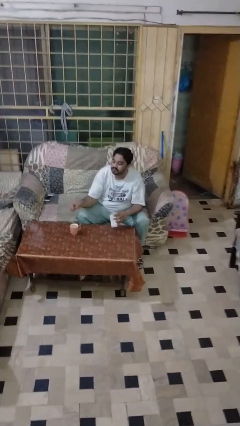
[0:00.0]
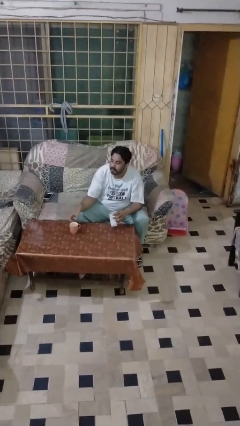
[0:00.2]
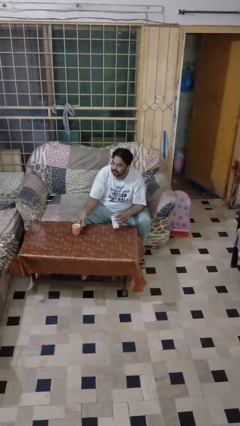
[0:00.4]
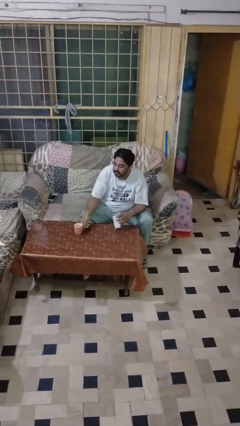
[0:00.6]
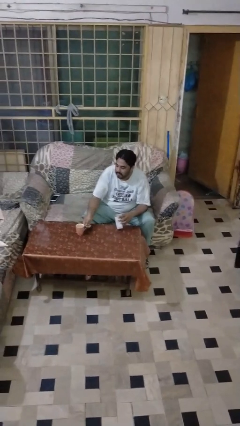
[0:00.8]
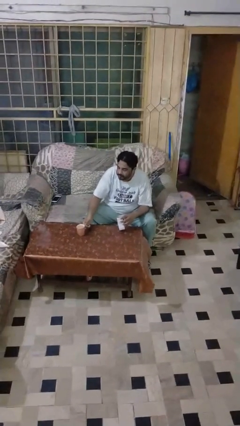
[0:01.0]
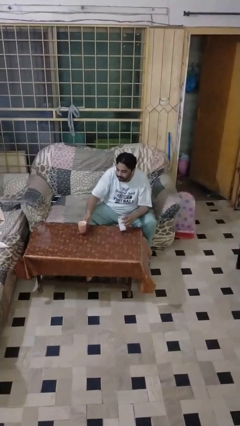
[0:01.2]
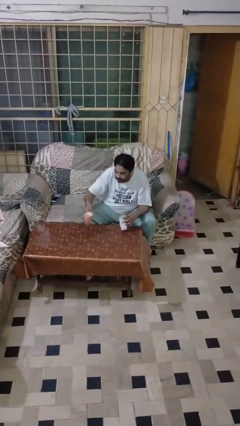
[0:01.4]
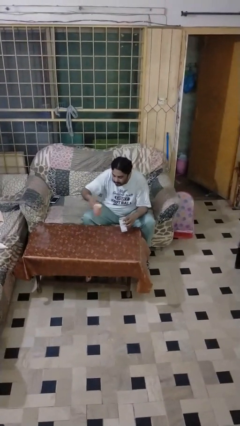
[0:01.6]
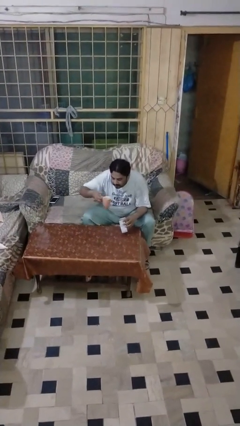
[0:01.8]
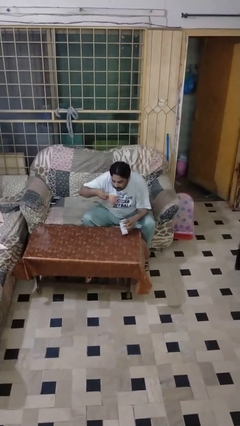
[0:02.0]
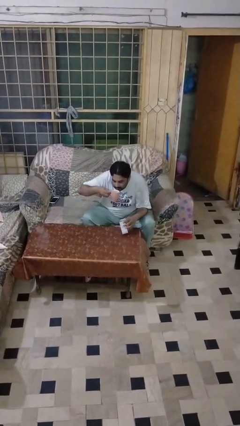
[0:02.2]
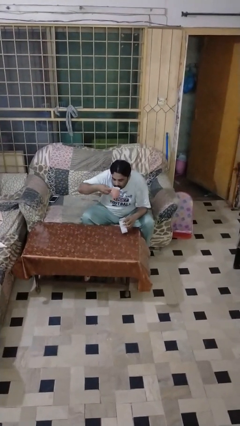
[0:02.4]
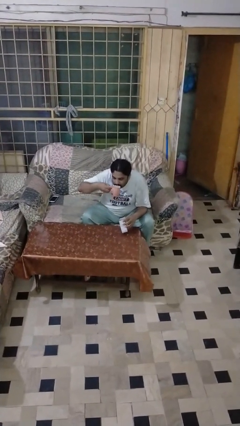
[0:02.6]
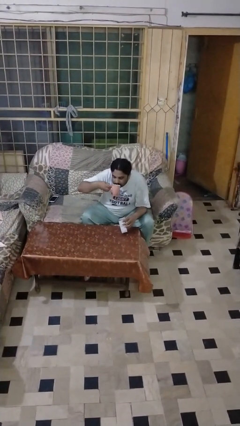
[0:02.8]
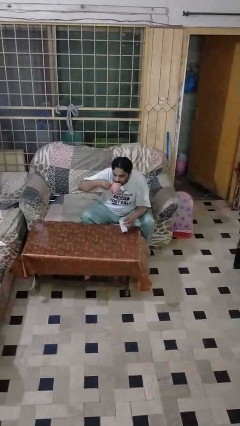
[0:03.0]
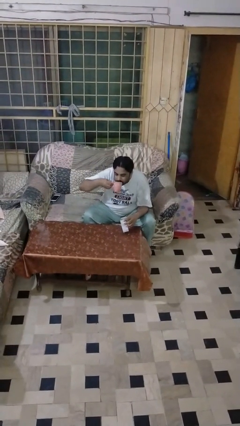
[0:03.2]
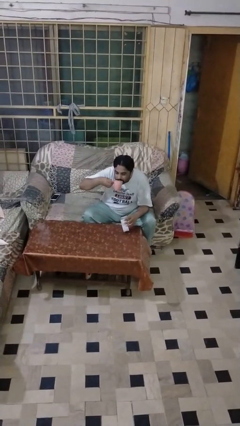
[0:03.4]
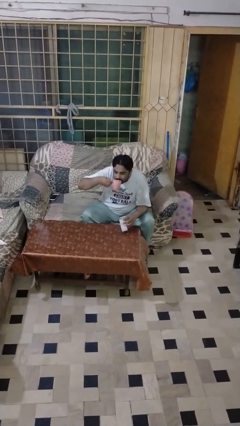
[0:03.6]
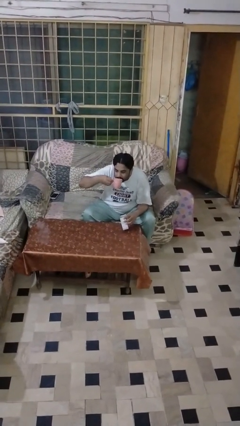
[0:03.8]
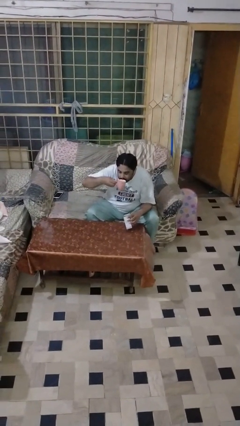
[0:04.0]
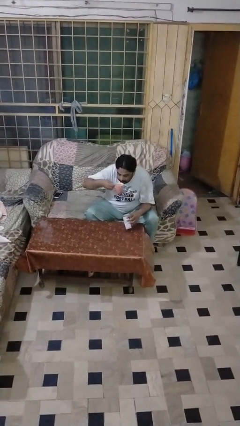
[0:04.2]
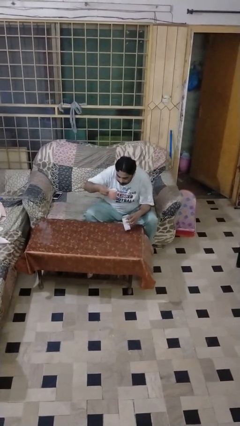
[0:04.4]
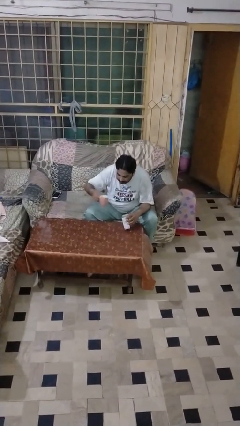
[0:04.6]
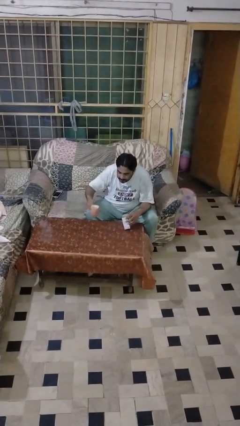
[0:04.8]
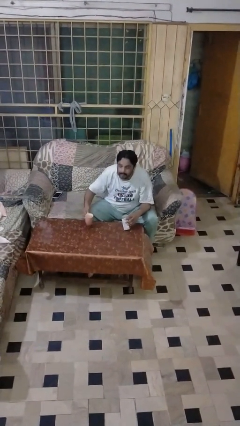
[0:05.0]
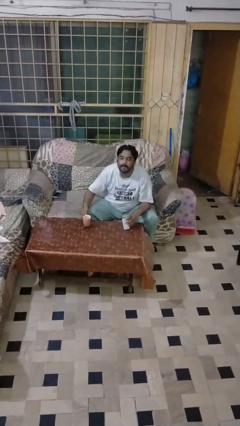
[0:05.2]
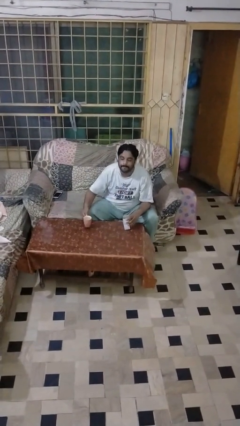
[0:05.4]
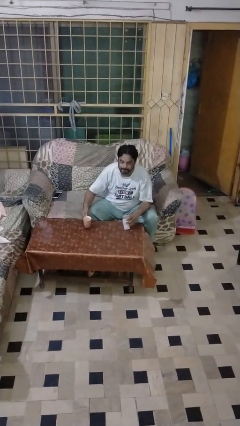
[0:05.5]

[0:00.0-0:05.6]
person drinks from cup

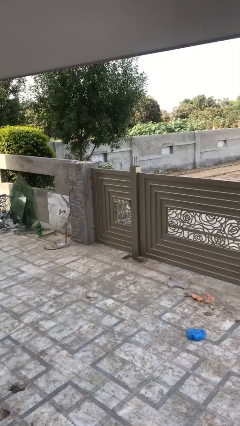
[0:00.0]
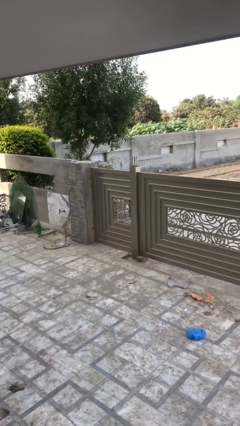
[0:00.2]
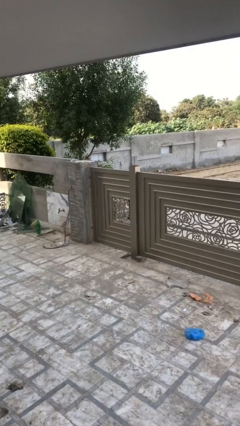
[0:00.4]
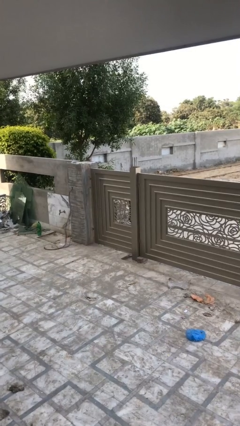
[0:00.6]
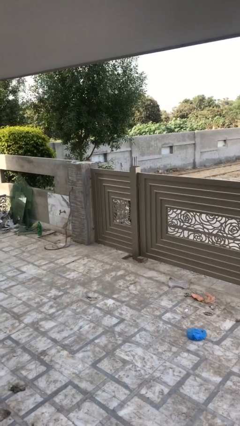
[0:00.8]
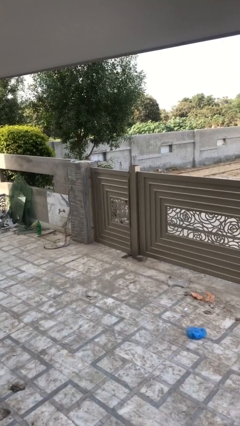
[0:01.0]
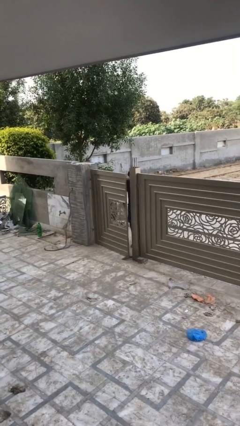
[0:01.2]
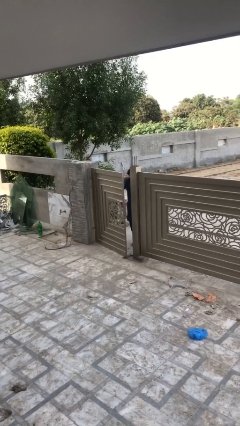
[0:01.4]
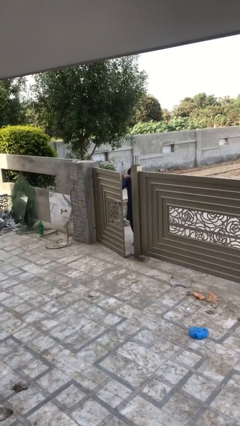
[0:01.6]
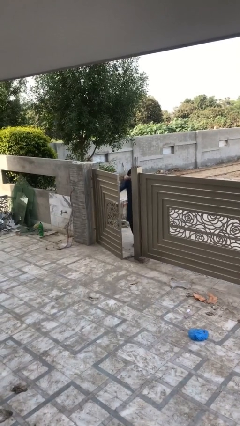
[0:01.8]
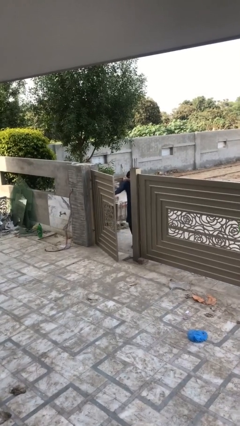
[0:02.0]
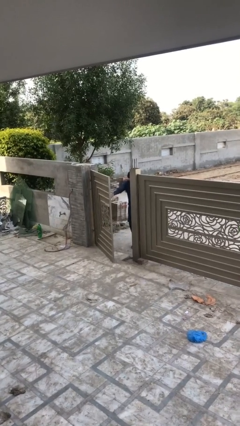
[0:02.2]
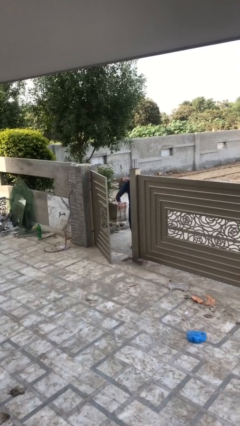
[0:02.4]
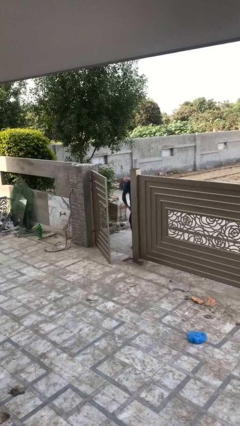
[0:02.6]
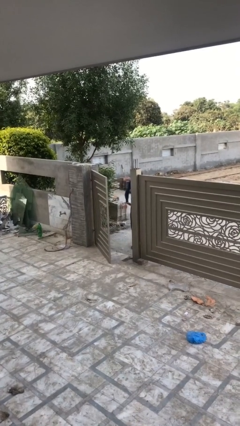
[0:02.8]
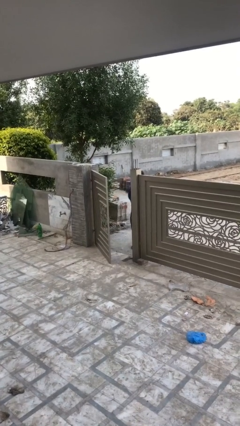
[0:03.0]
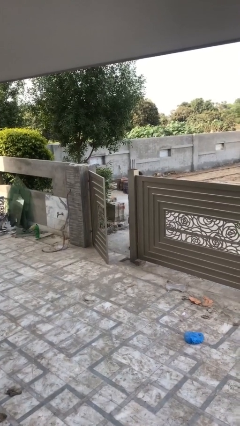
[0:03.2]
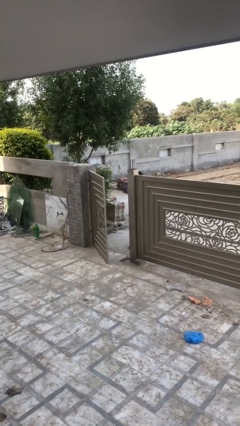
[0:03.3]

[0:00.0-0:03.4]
person opens facility door

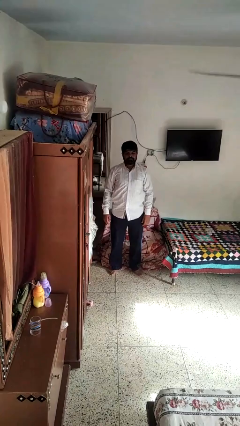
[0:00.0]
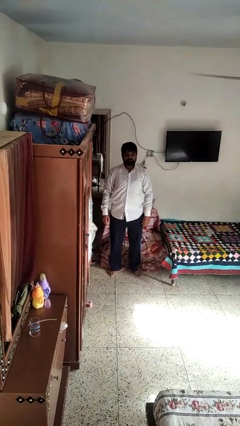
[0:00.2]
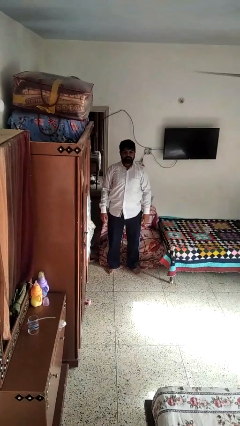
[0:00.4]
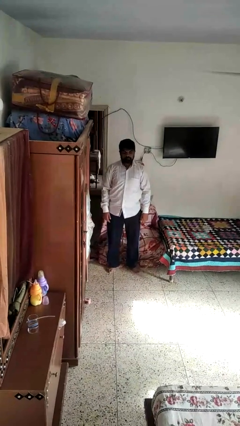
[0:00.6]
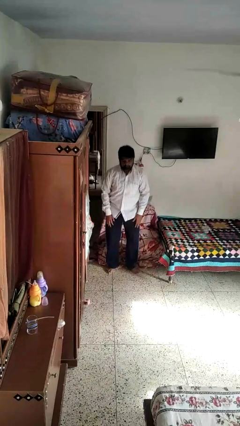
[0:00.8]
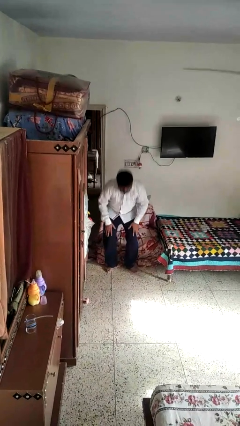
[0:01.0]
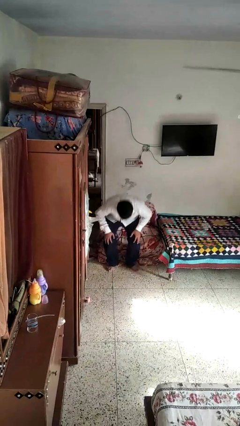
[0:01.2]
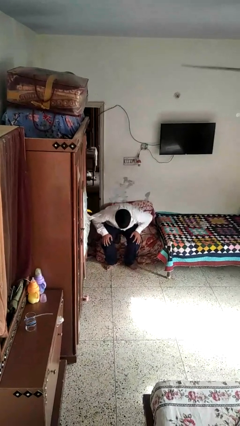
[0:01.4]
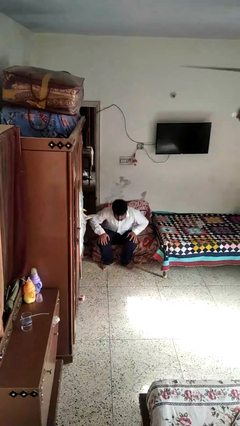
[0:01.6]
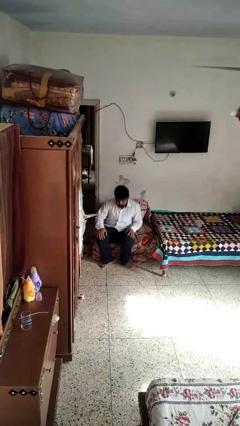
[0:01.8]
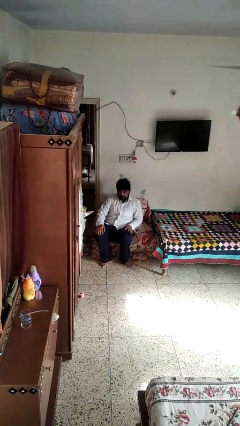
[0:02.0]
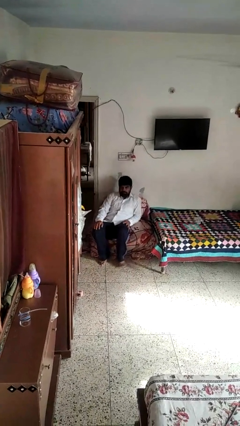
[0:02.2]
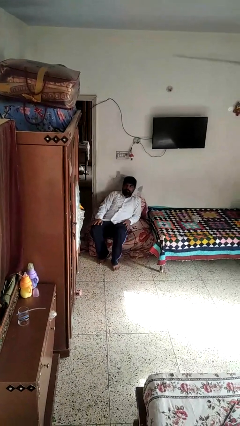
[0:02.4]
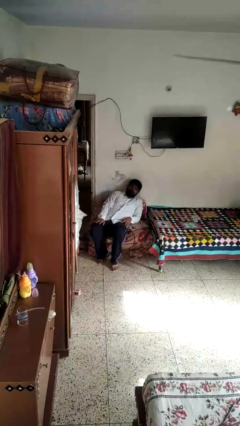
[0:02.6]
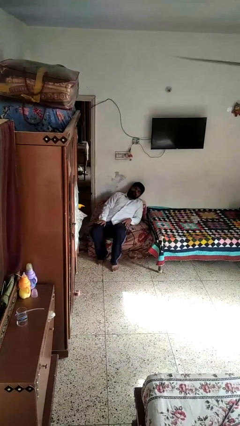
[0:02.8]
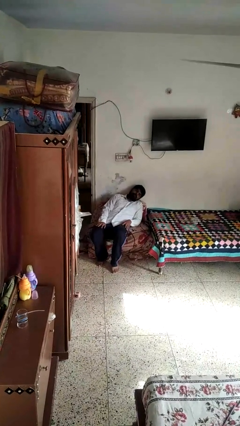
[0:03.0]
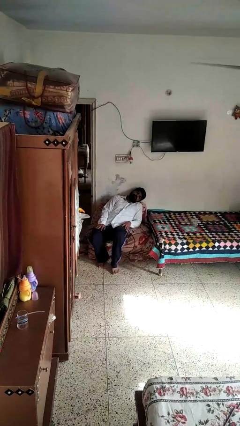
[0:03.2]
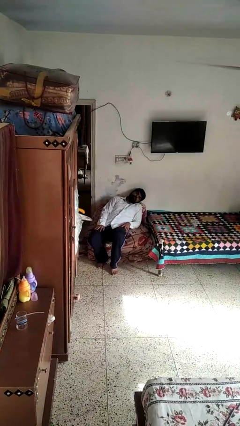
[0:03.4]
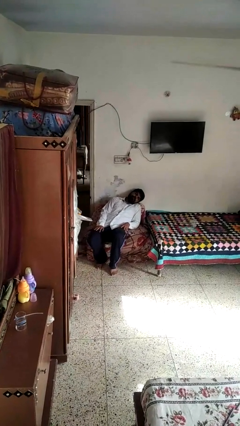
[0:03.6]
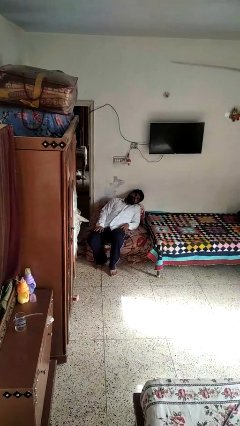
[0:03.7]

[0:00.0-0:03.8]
person lies down on couch

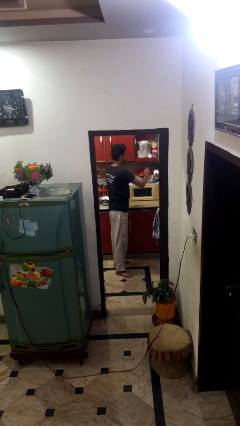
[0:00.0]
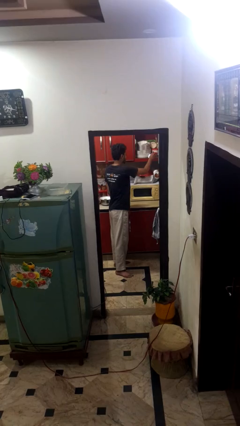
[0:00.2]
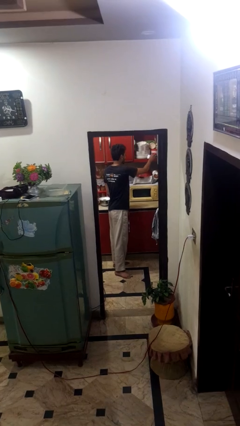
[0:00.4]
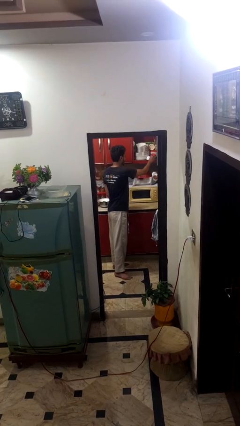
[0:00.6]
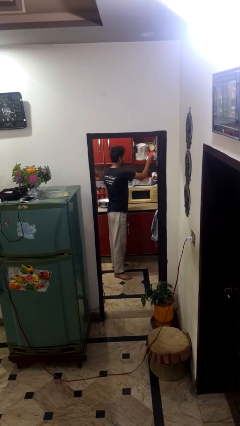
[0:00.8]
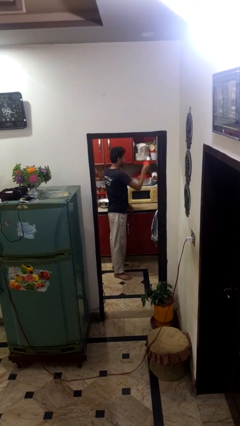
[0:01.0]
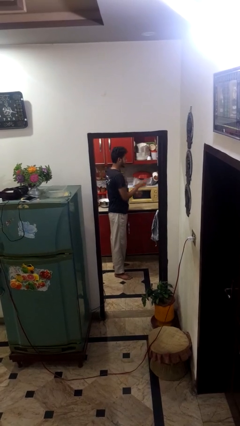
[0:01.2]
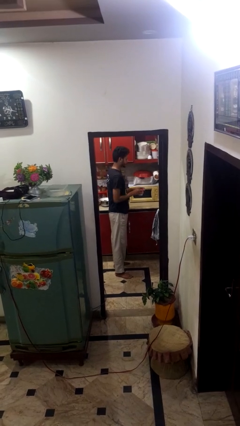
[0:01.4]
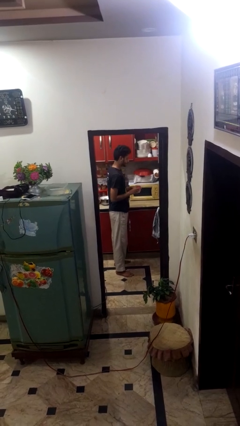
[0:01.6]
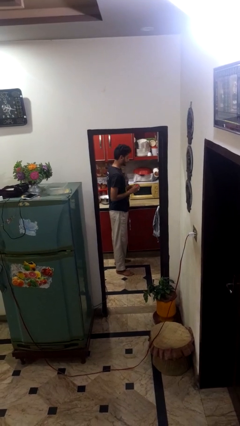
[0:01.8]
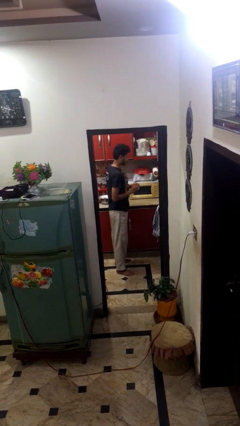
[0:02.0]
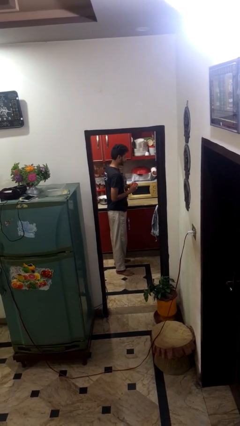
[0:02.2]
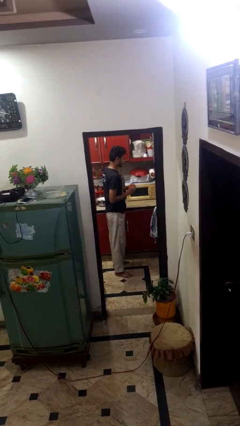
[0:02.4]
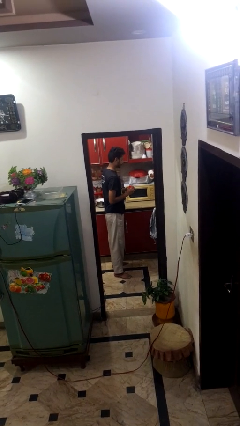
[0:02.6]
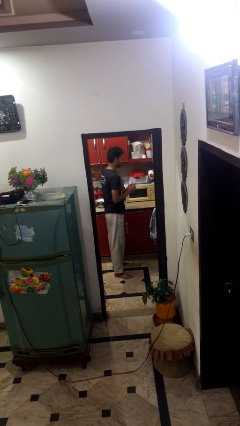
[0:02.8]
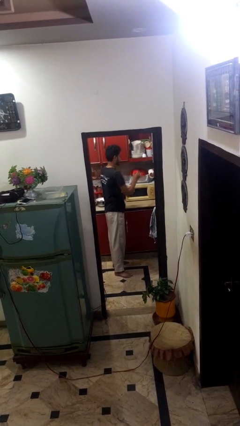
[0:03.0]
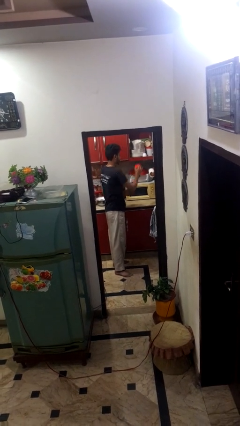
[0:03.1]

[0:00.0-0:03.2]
person picks up object from cabinet

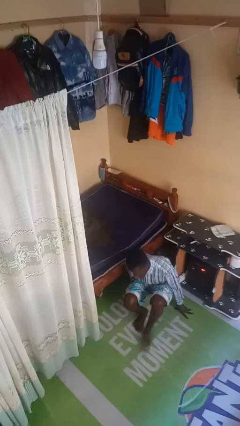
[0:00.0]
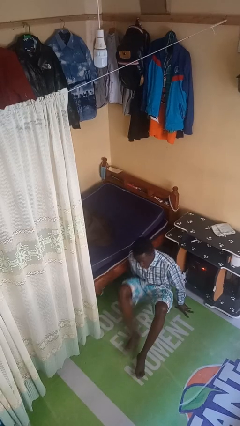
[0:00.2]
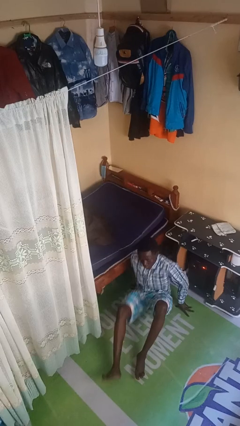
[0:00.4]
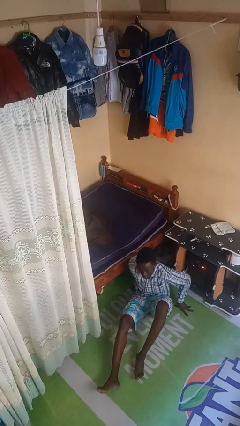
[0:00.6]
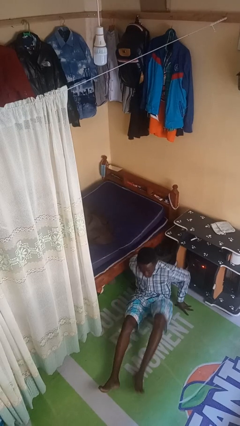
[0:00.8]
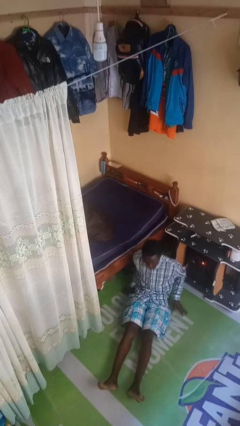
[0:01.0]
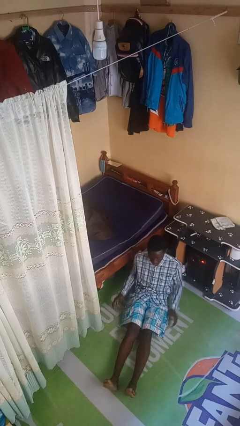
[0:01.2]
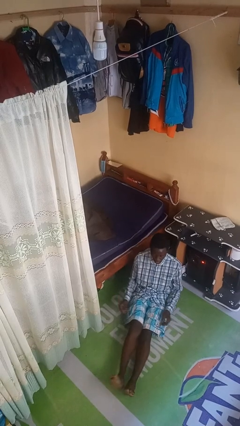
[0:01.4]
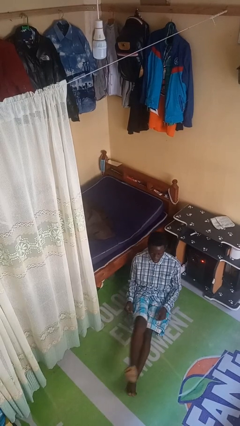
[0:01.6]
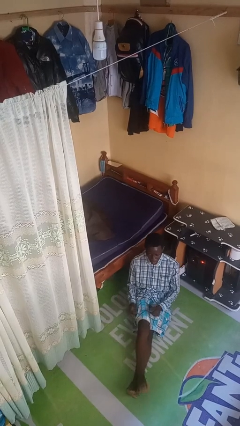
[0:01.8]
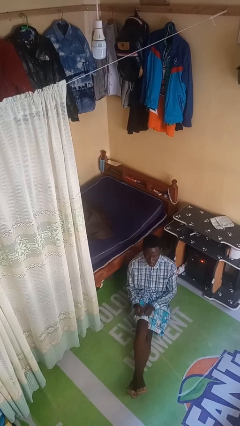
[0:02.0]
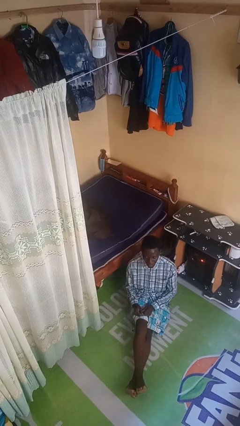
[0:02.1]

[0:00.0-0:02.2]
person sits crisscross
